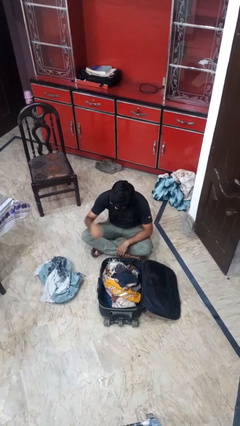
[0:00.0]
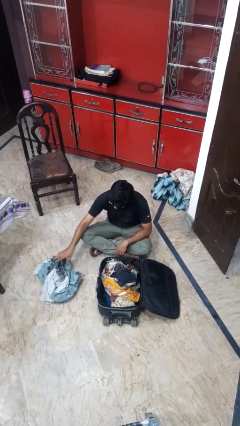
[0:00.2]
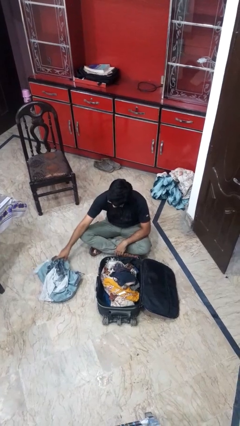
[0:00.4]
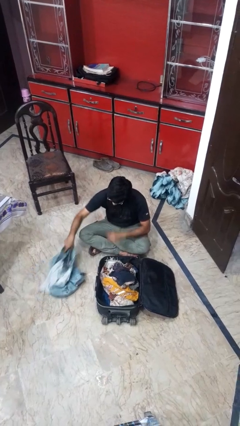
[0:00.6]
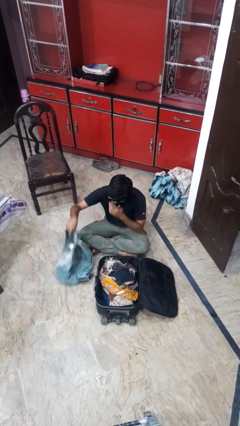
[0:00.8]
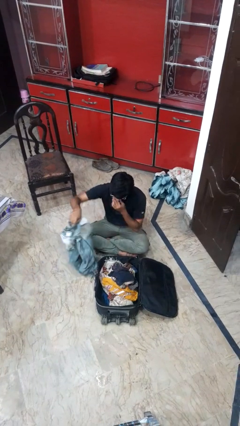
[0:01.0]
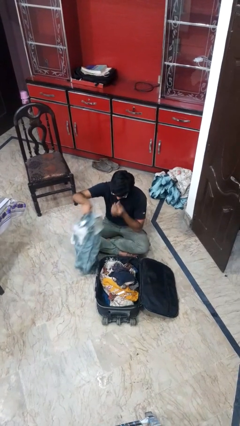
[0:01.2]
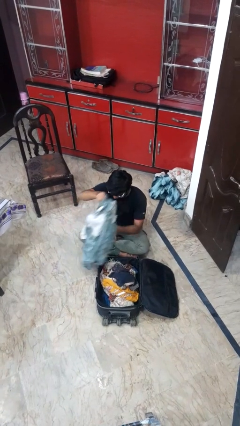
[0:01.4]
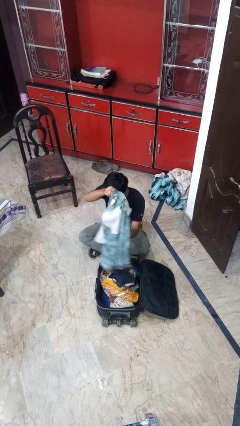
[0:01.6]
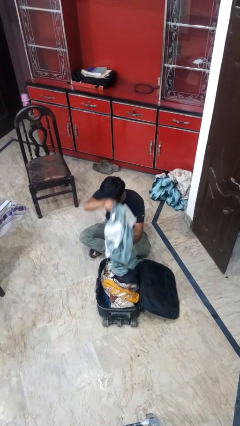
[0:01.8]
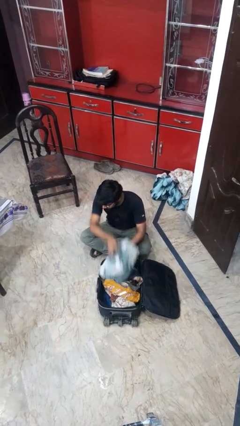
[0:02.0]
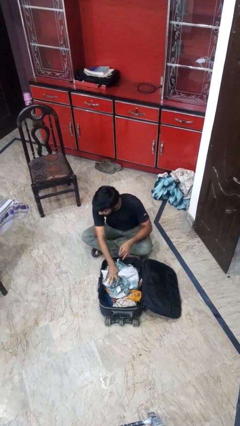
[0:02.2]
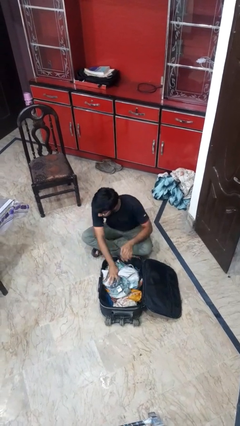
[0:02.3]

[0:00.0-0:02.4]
person loads clothes into suitcase

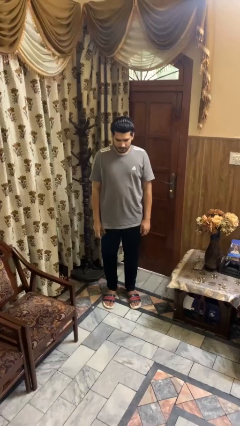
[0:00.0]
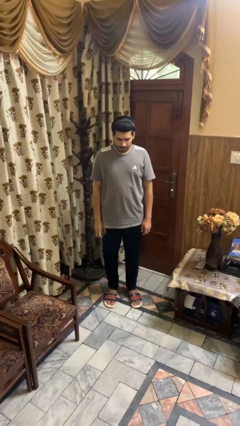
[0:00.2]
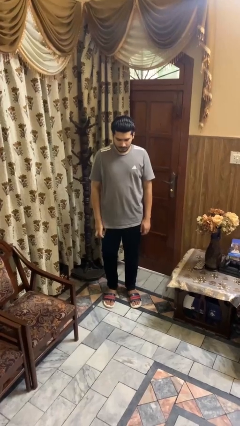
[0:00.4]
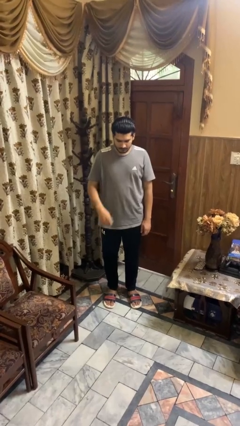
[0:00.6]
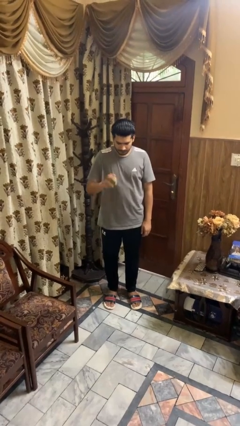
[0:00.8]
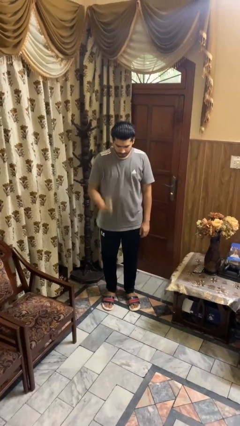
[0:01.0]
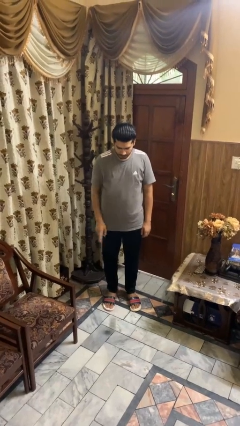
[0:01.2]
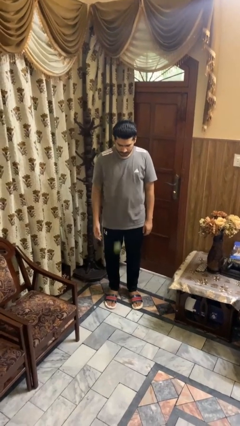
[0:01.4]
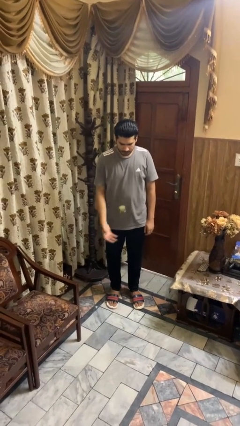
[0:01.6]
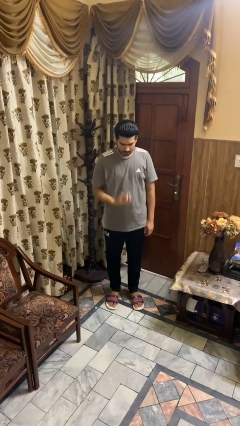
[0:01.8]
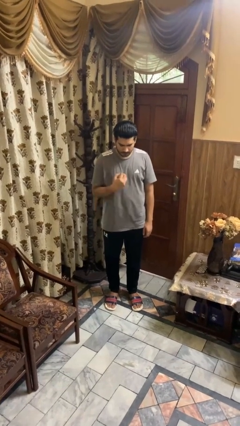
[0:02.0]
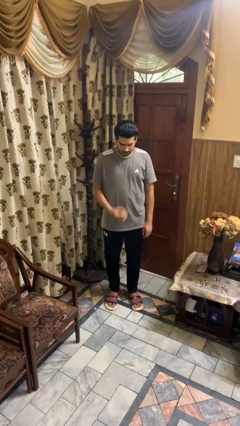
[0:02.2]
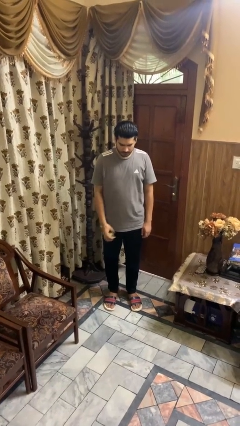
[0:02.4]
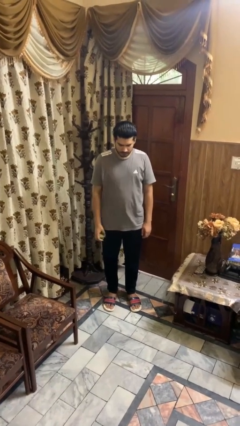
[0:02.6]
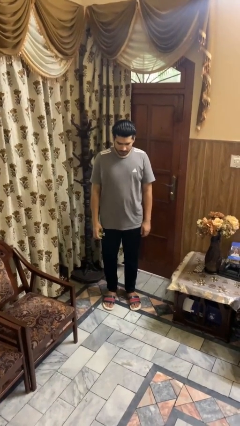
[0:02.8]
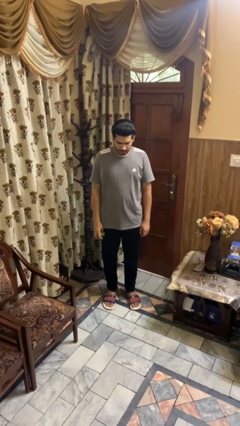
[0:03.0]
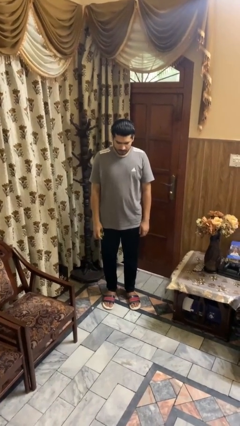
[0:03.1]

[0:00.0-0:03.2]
person bounces ball on floor

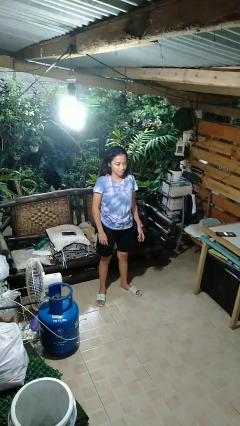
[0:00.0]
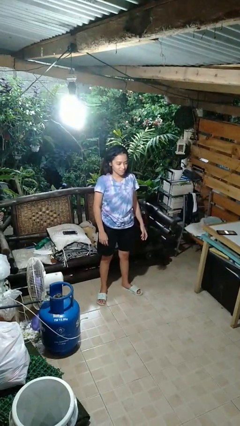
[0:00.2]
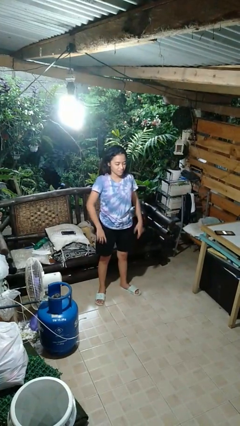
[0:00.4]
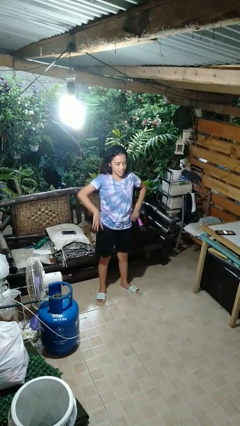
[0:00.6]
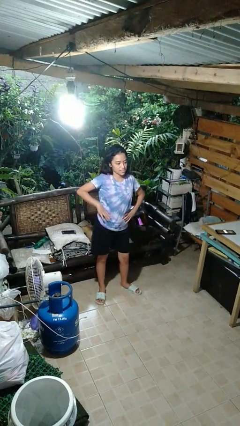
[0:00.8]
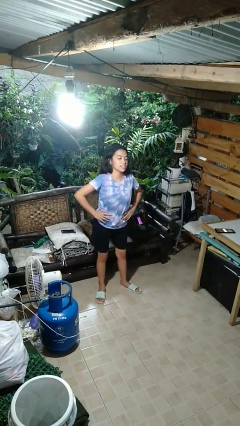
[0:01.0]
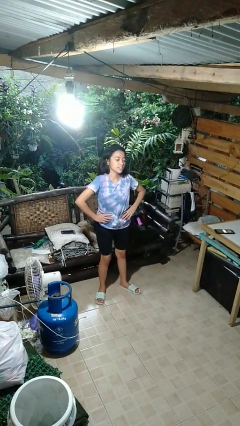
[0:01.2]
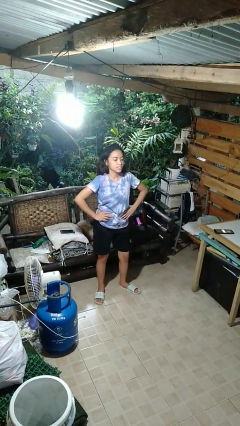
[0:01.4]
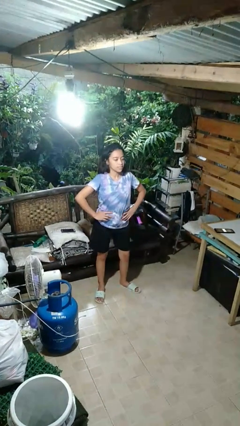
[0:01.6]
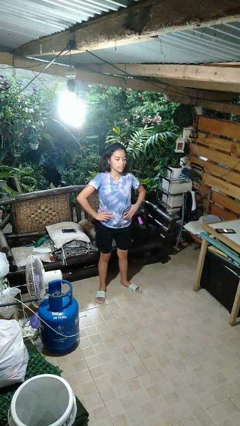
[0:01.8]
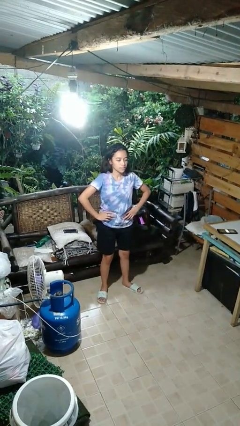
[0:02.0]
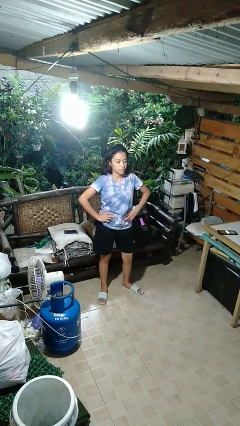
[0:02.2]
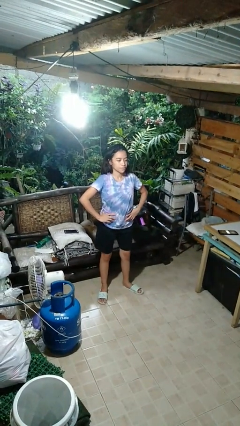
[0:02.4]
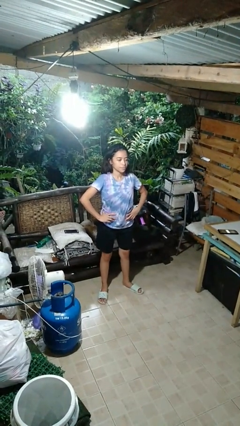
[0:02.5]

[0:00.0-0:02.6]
person wiggles hips

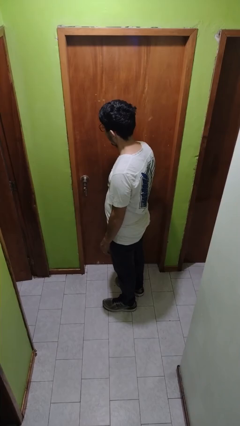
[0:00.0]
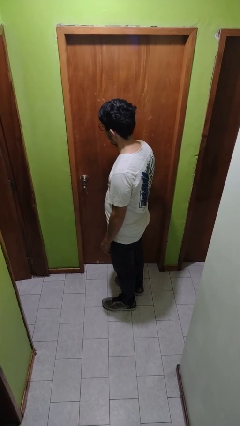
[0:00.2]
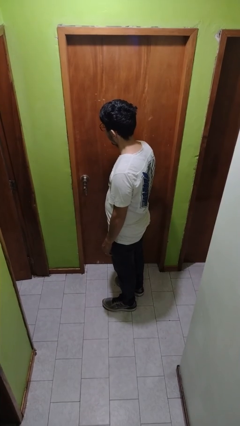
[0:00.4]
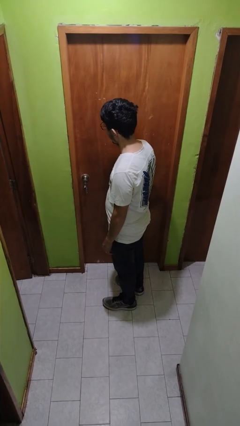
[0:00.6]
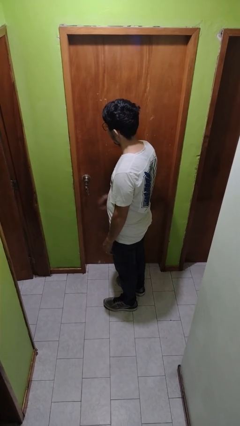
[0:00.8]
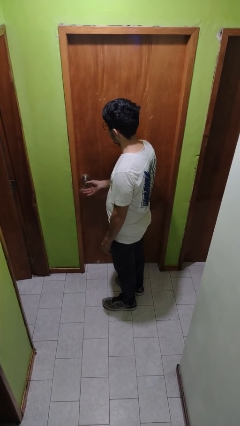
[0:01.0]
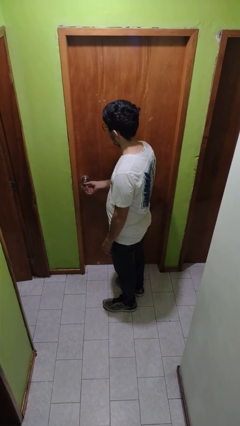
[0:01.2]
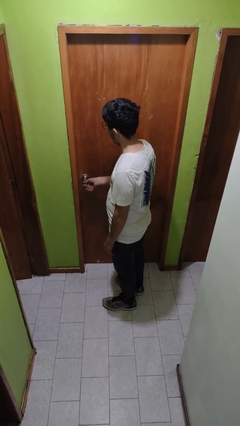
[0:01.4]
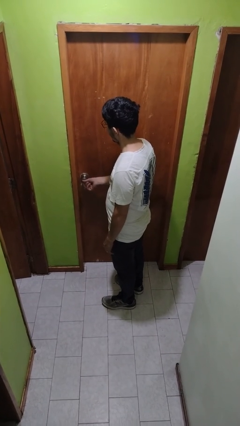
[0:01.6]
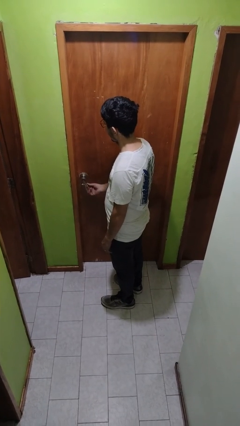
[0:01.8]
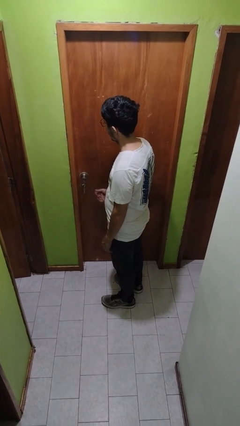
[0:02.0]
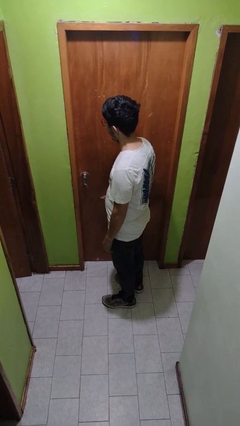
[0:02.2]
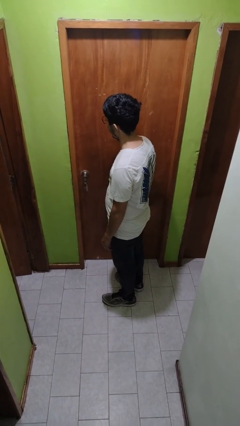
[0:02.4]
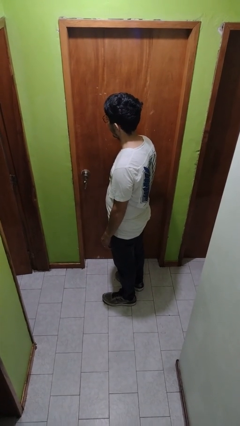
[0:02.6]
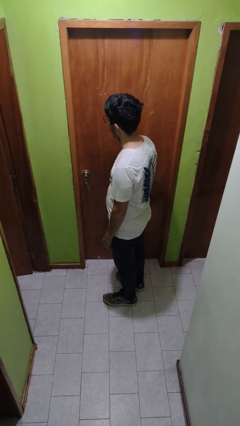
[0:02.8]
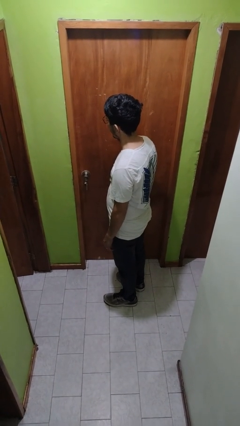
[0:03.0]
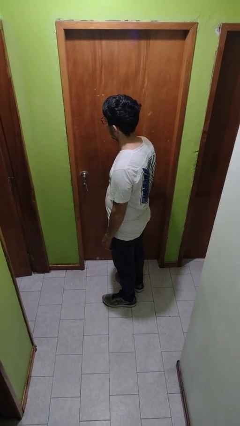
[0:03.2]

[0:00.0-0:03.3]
person locks door with keys

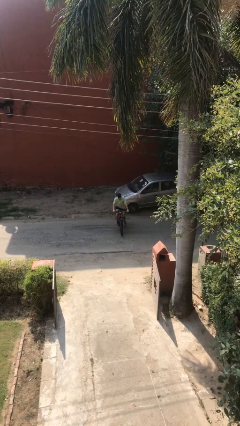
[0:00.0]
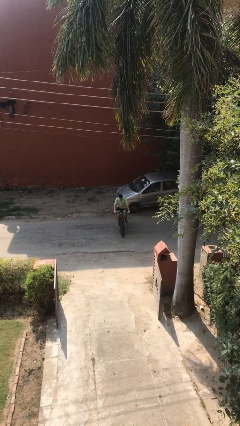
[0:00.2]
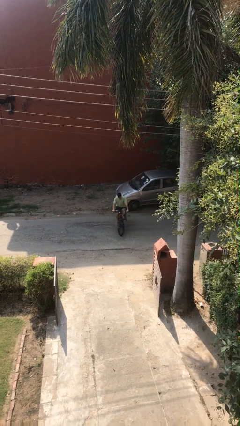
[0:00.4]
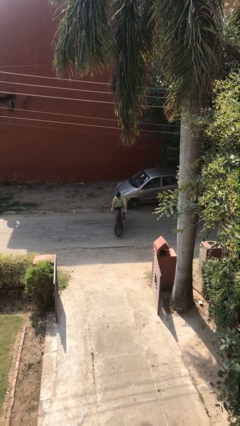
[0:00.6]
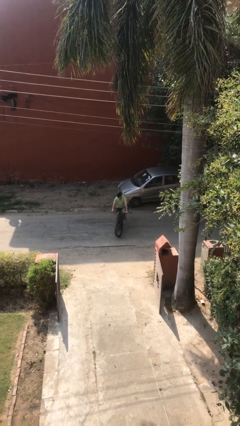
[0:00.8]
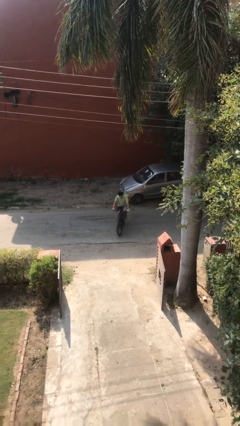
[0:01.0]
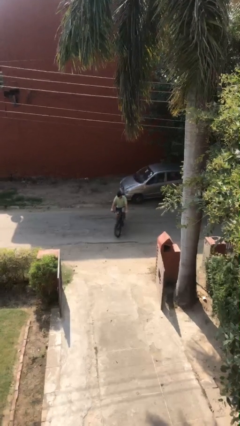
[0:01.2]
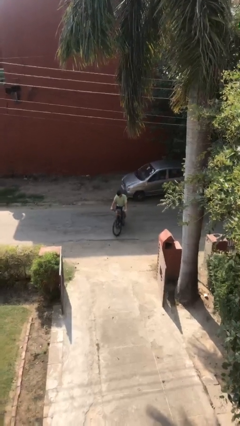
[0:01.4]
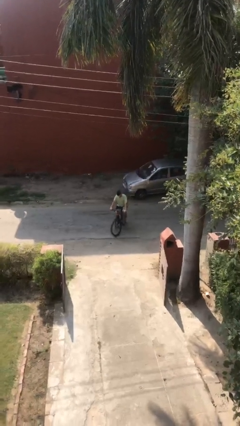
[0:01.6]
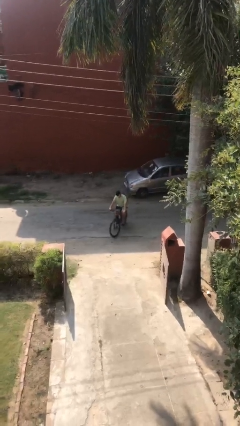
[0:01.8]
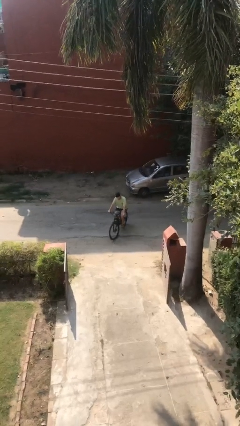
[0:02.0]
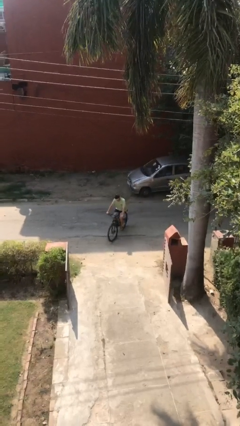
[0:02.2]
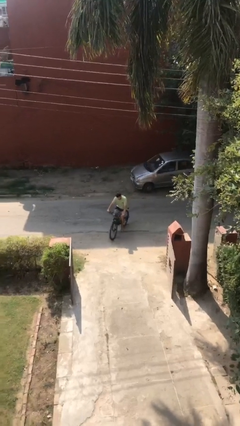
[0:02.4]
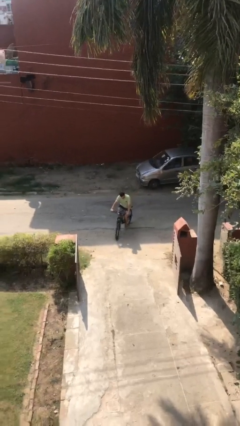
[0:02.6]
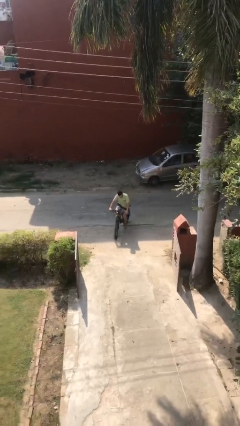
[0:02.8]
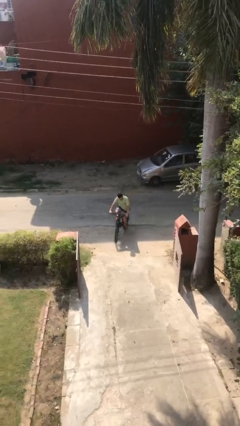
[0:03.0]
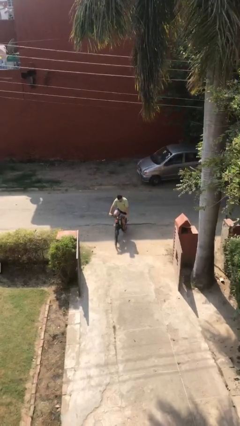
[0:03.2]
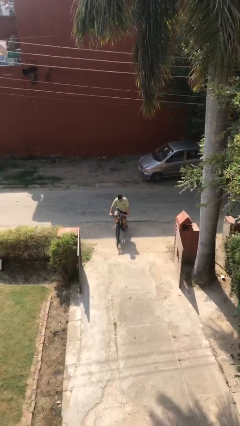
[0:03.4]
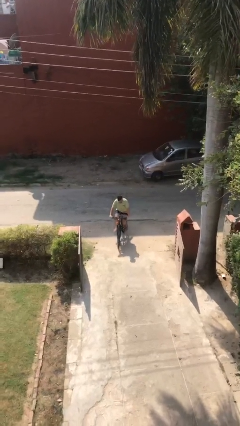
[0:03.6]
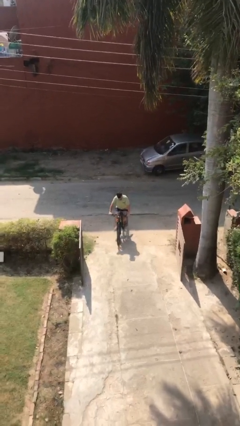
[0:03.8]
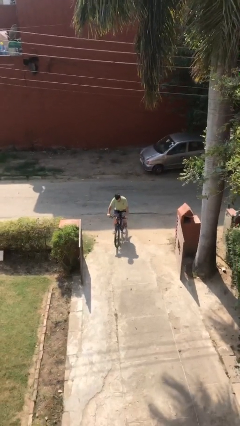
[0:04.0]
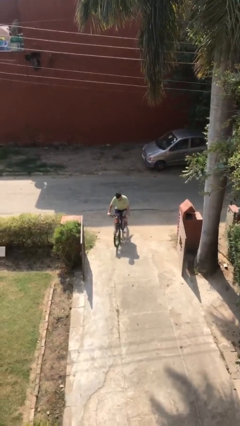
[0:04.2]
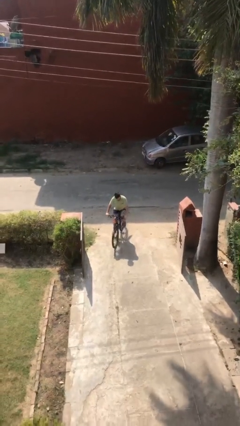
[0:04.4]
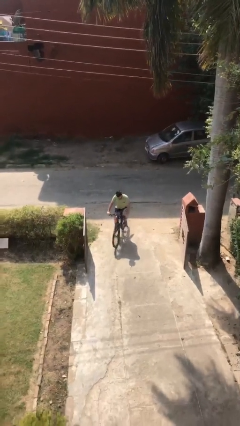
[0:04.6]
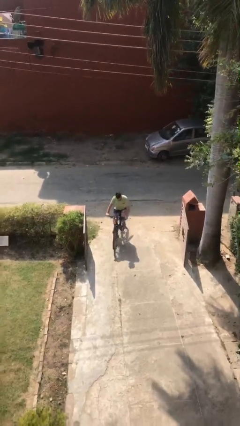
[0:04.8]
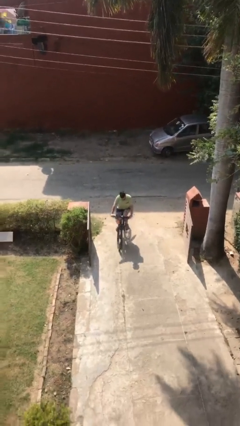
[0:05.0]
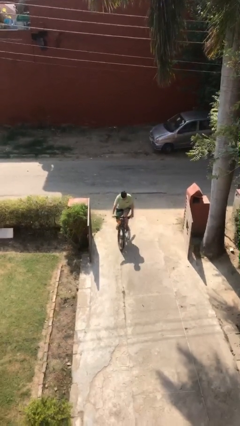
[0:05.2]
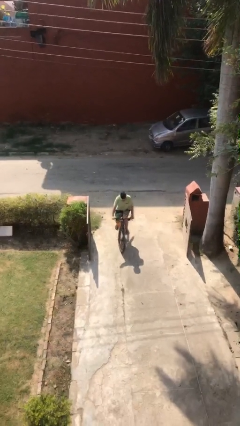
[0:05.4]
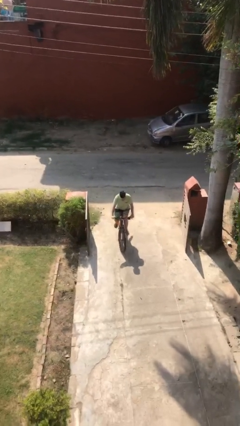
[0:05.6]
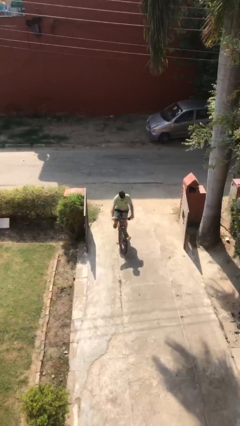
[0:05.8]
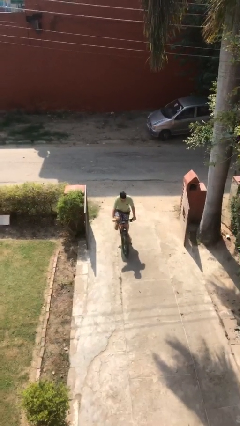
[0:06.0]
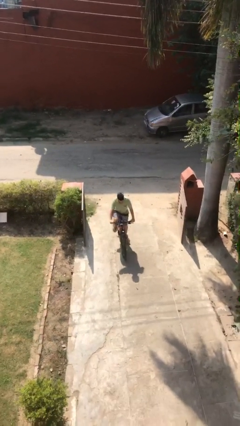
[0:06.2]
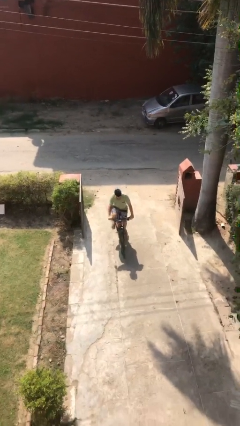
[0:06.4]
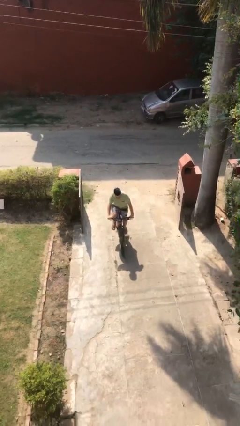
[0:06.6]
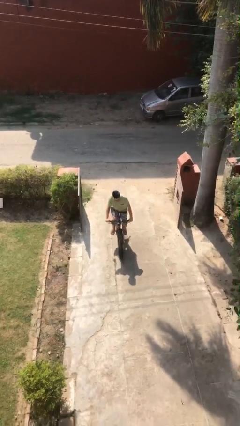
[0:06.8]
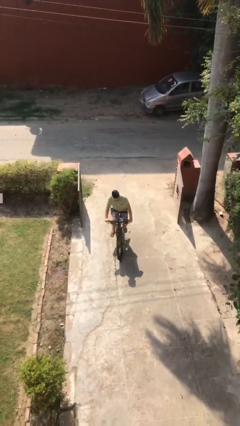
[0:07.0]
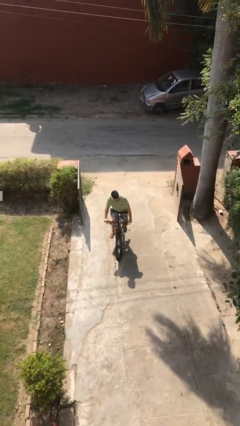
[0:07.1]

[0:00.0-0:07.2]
person rides bicycle
